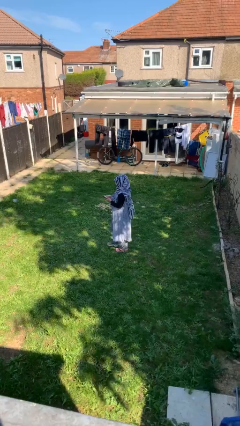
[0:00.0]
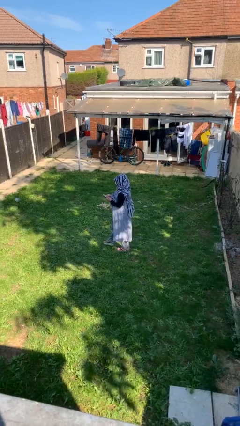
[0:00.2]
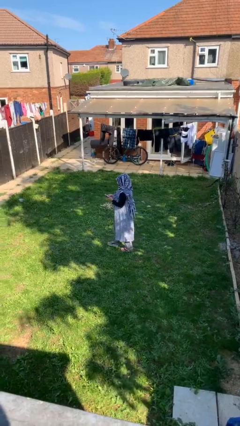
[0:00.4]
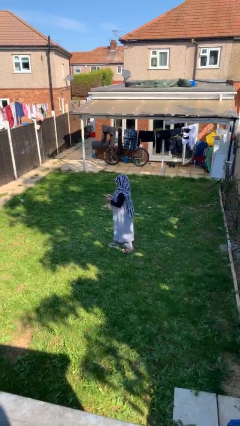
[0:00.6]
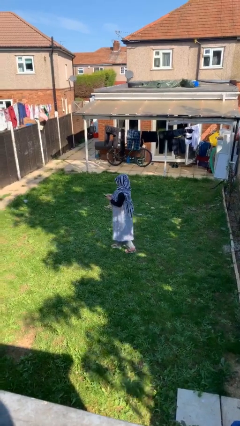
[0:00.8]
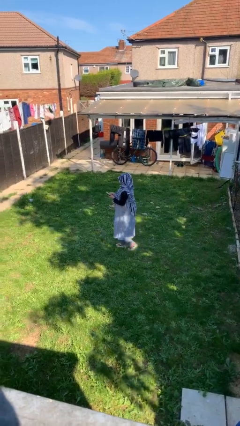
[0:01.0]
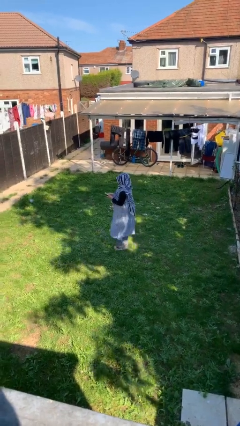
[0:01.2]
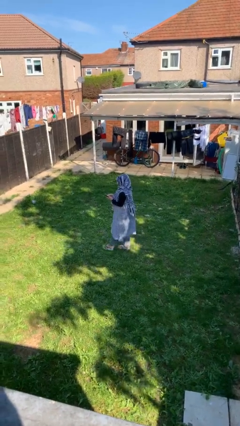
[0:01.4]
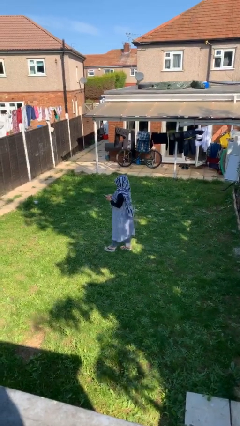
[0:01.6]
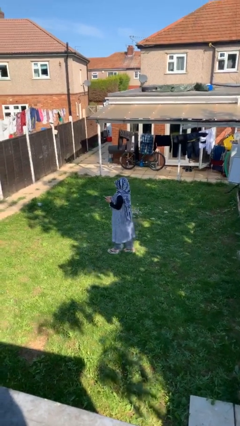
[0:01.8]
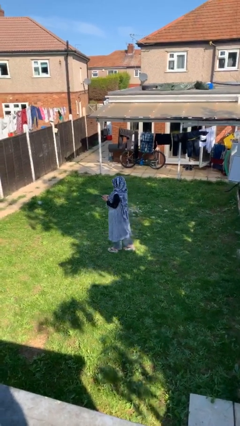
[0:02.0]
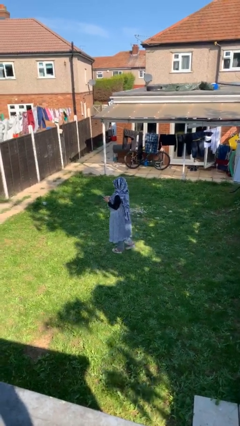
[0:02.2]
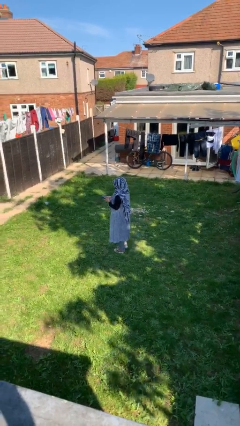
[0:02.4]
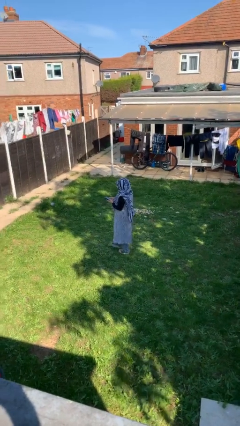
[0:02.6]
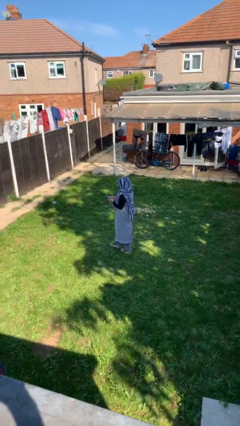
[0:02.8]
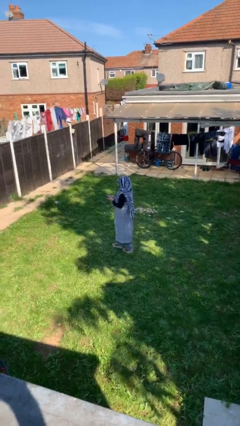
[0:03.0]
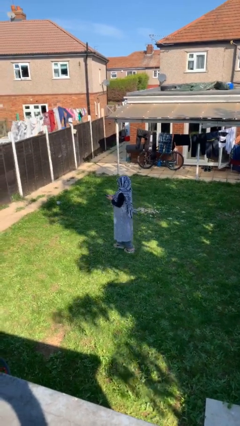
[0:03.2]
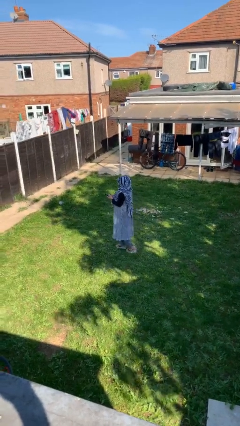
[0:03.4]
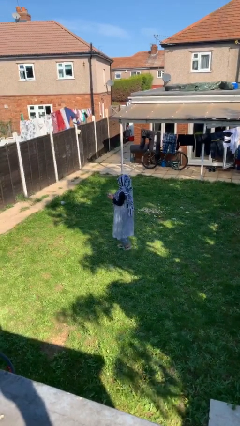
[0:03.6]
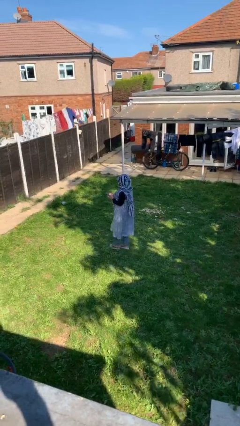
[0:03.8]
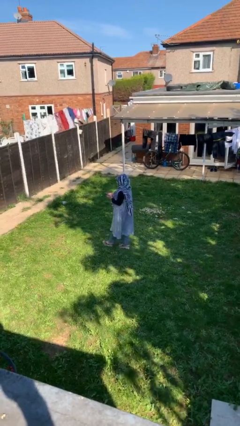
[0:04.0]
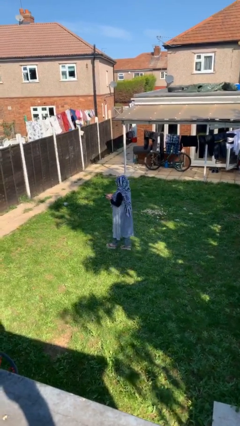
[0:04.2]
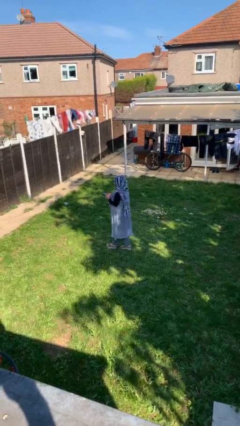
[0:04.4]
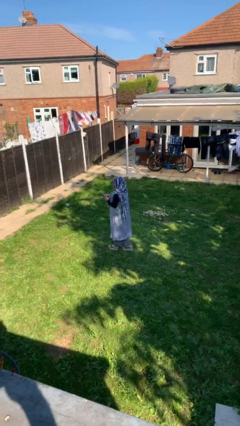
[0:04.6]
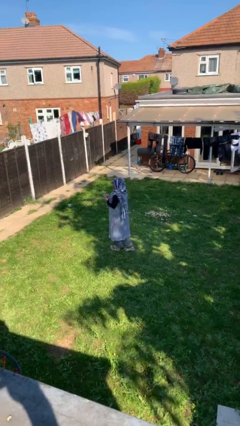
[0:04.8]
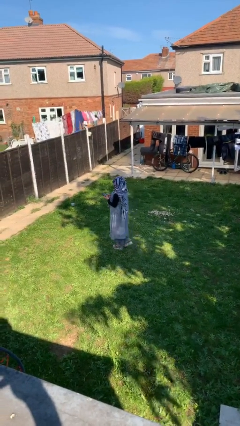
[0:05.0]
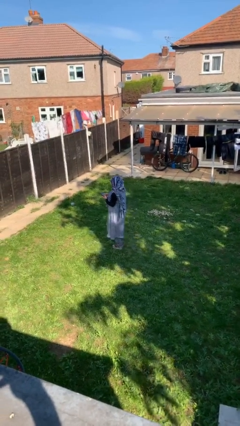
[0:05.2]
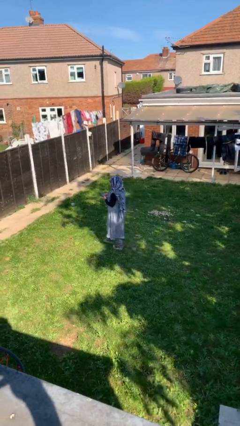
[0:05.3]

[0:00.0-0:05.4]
person texts on phone

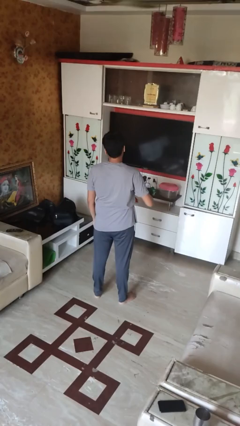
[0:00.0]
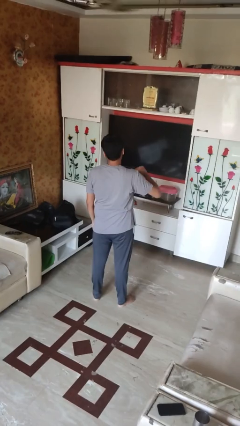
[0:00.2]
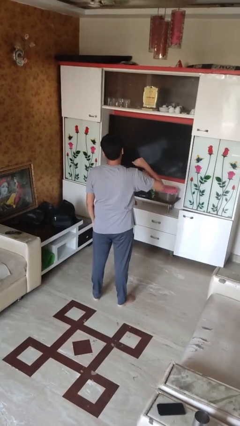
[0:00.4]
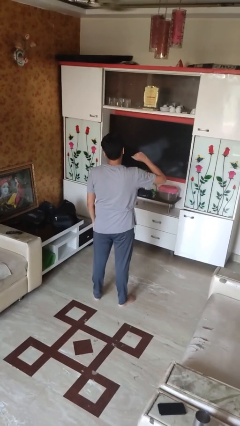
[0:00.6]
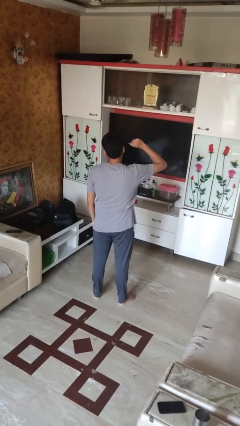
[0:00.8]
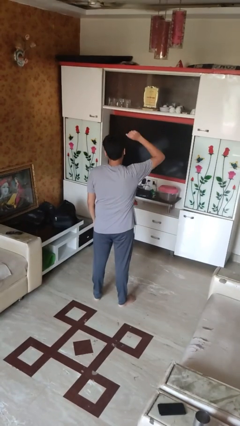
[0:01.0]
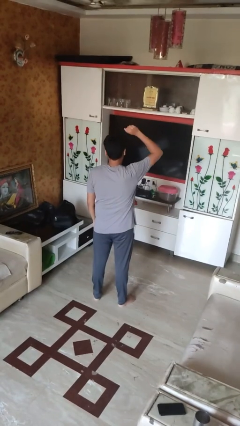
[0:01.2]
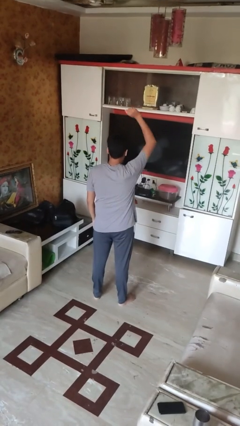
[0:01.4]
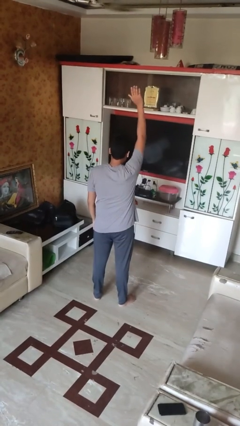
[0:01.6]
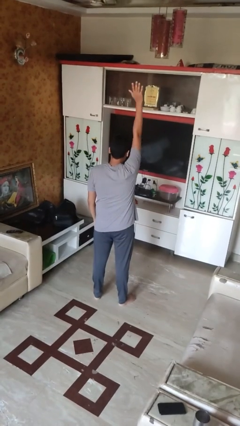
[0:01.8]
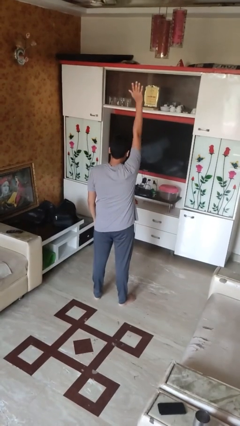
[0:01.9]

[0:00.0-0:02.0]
person gestures raise hand

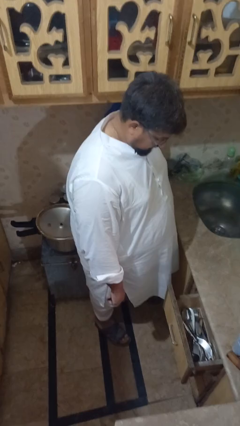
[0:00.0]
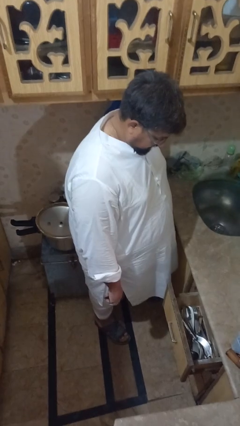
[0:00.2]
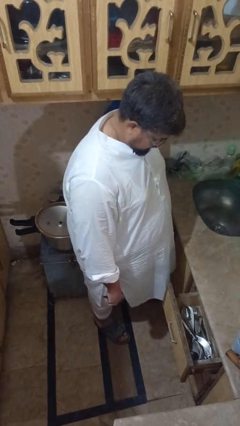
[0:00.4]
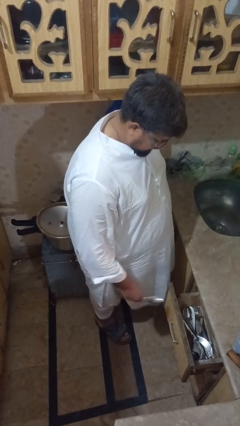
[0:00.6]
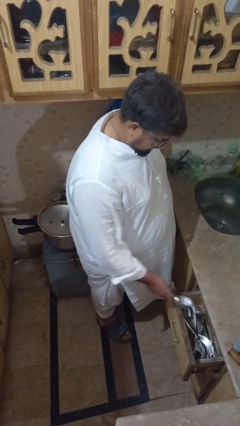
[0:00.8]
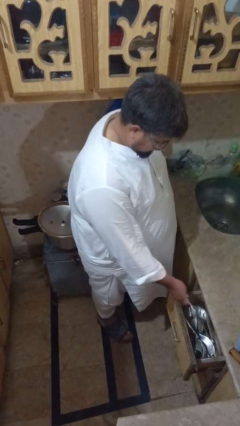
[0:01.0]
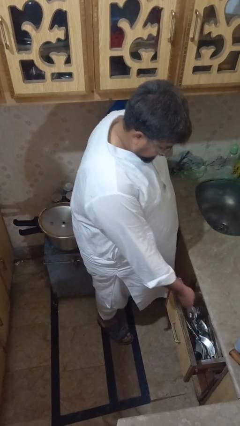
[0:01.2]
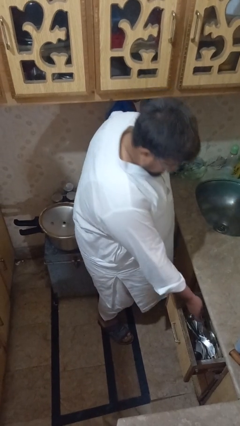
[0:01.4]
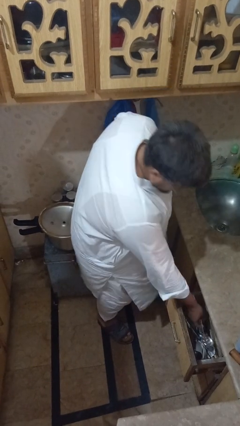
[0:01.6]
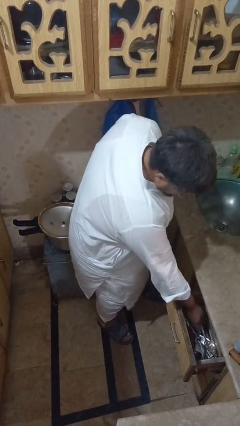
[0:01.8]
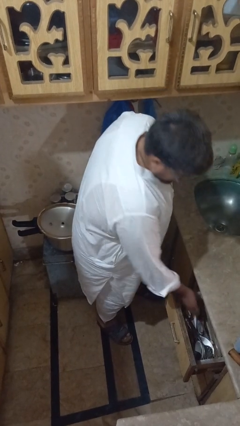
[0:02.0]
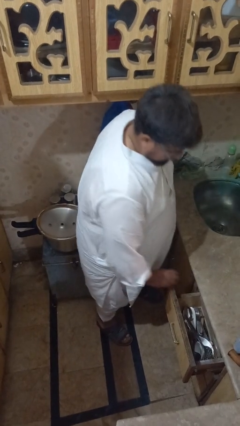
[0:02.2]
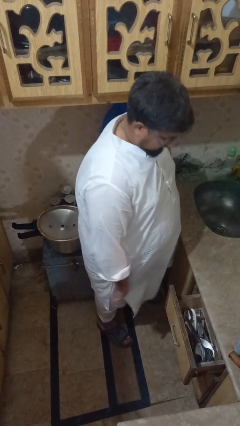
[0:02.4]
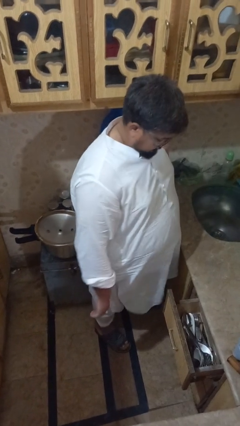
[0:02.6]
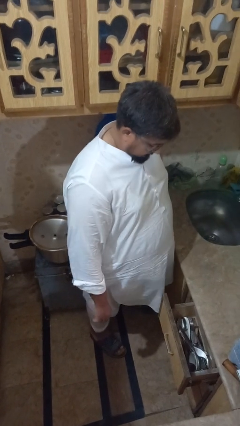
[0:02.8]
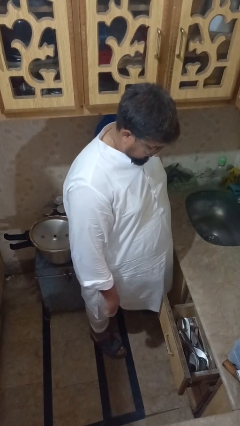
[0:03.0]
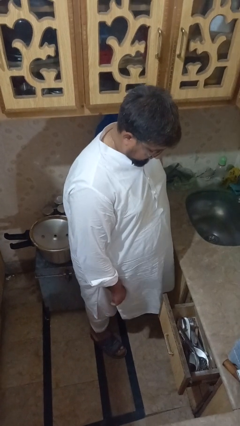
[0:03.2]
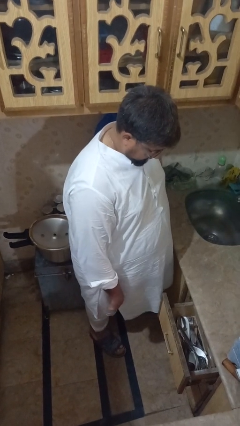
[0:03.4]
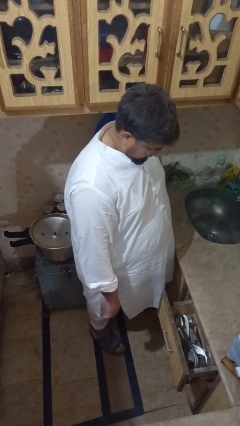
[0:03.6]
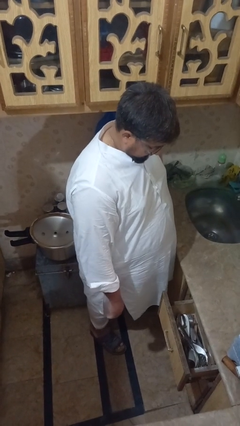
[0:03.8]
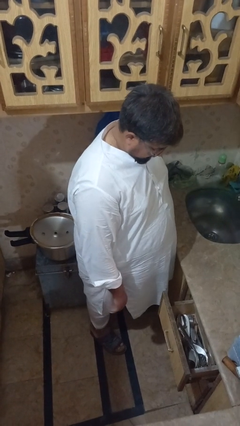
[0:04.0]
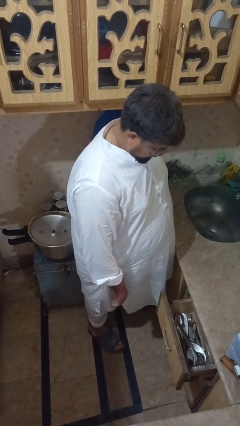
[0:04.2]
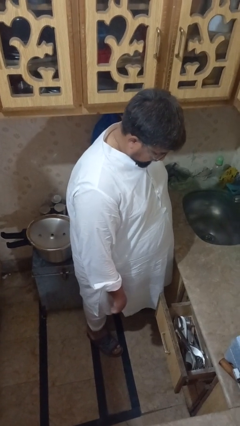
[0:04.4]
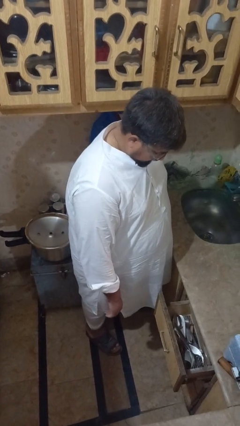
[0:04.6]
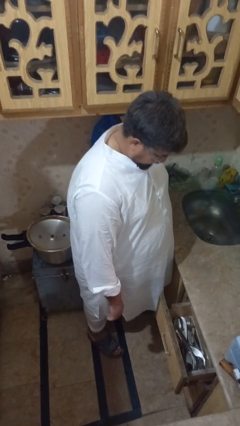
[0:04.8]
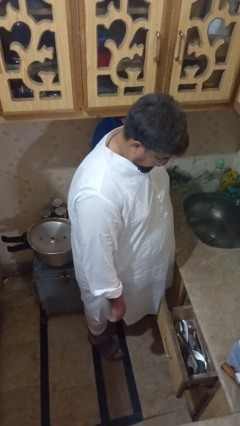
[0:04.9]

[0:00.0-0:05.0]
person puts object into kitchen drawer

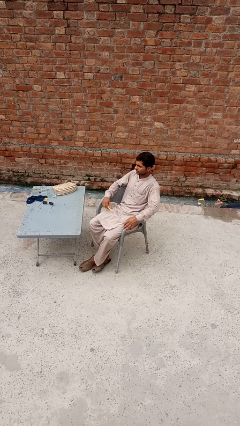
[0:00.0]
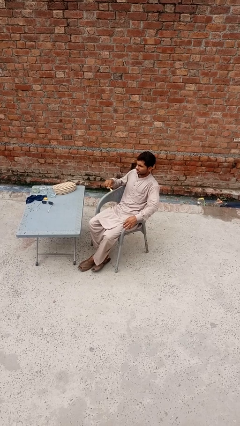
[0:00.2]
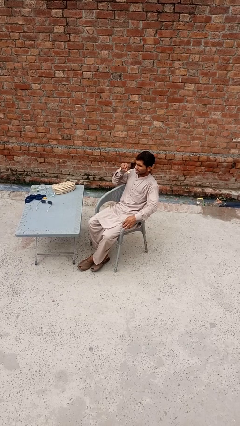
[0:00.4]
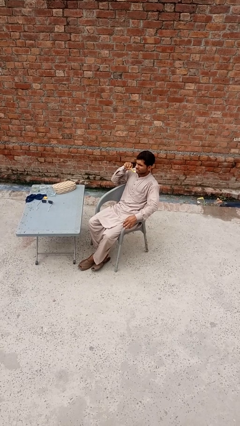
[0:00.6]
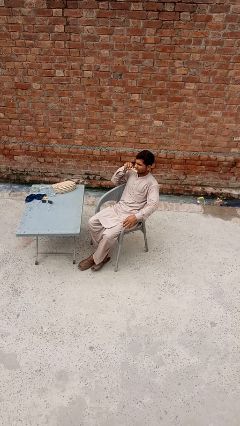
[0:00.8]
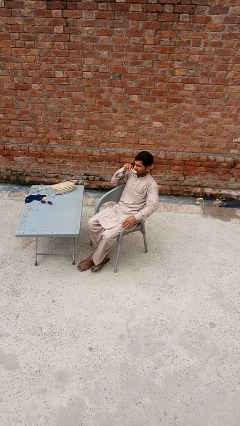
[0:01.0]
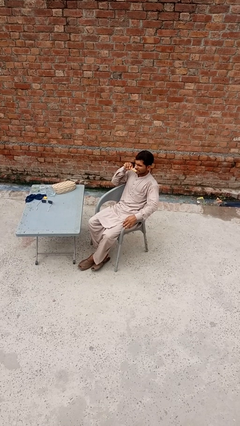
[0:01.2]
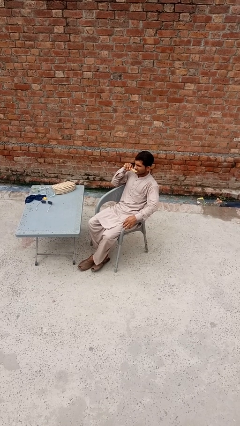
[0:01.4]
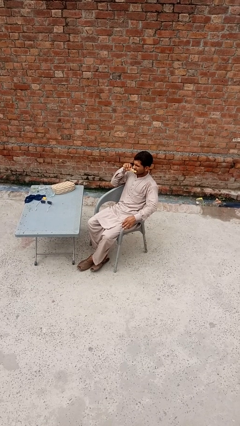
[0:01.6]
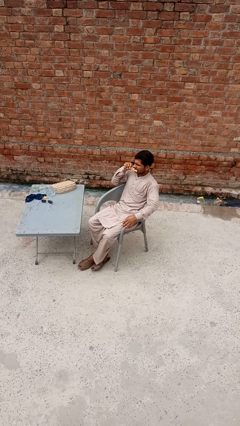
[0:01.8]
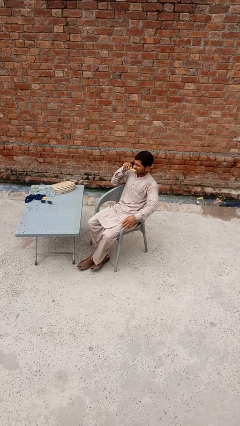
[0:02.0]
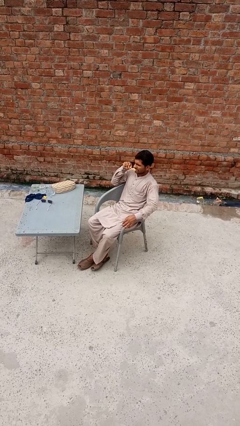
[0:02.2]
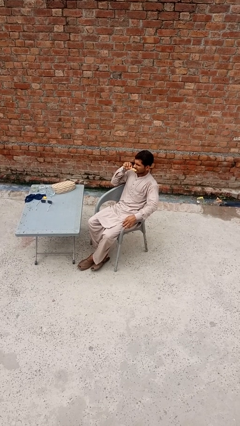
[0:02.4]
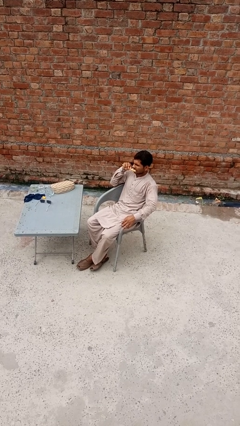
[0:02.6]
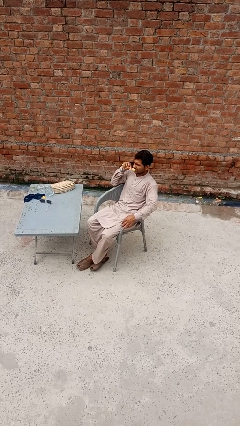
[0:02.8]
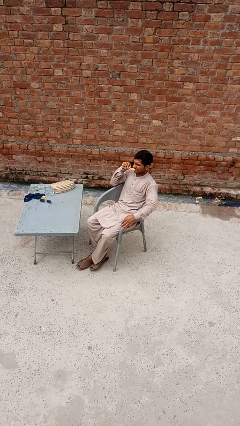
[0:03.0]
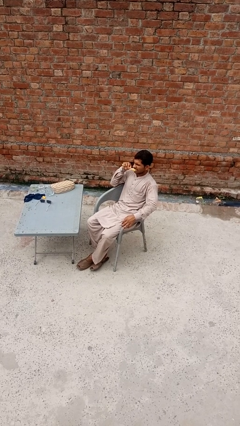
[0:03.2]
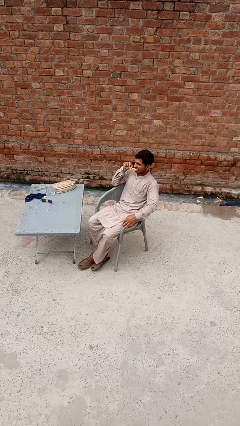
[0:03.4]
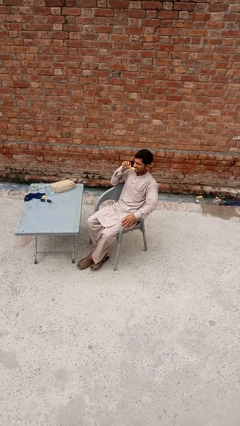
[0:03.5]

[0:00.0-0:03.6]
person brushes teeth

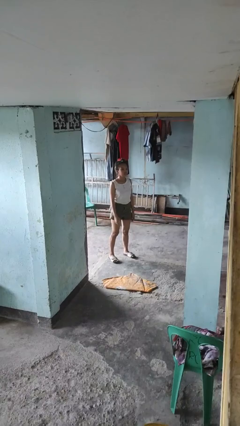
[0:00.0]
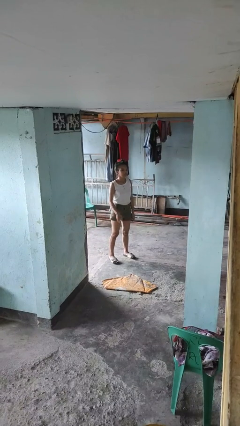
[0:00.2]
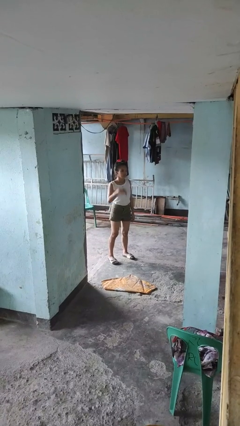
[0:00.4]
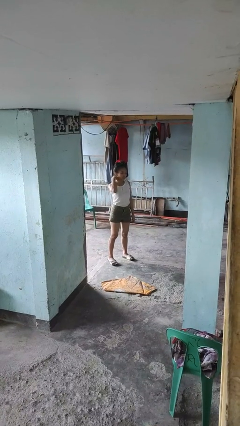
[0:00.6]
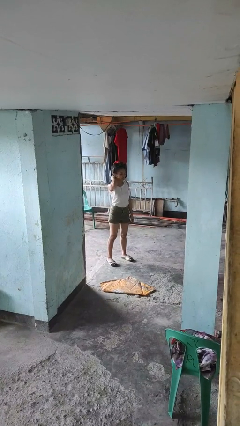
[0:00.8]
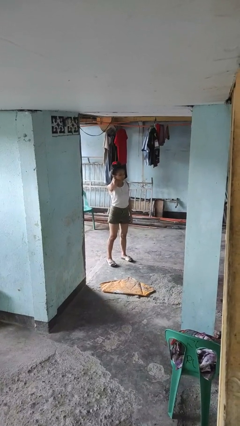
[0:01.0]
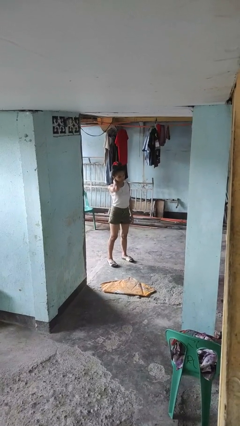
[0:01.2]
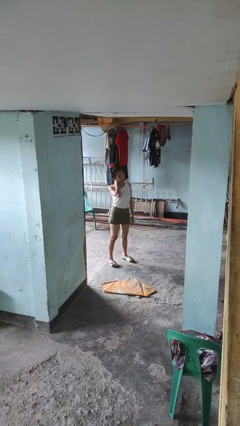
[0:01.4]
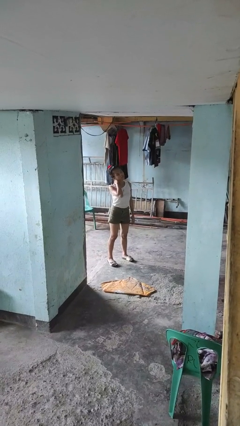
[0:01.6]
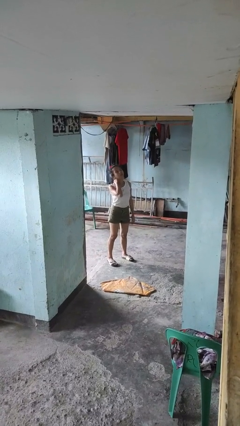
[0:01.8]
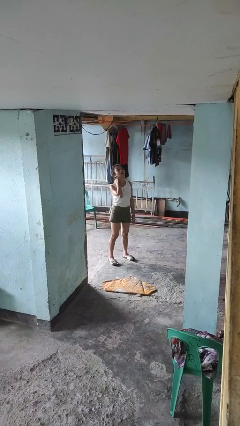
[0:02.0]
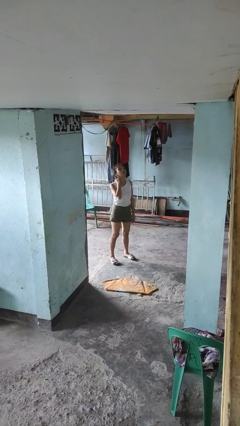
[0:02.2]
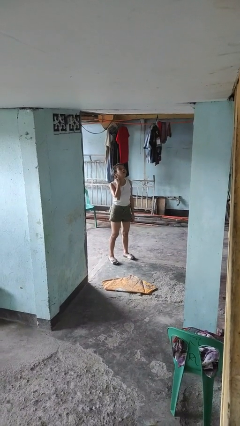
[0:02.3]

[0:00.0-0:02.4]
person rubs neck
